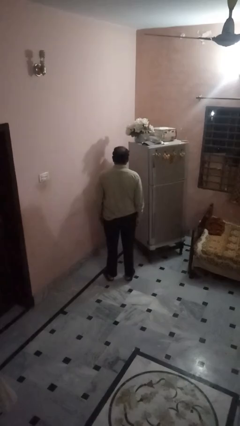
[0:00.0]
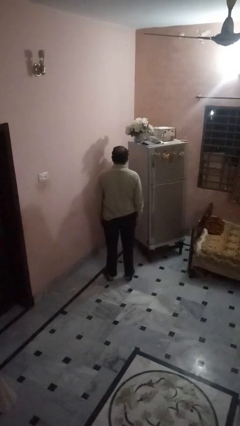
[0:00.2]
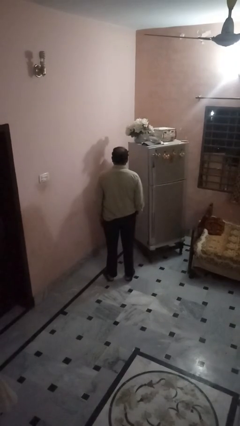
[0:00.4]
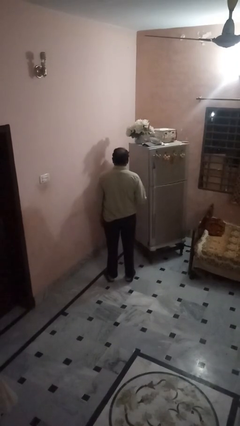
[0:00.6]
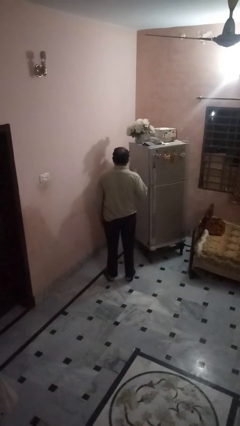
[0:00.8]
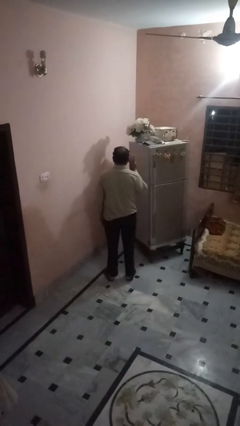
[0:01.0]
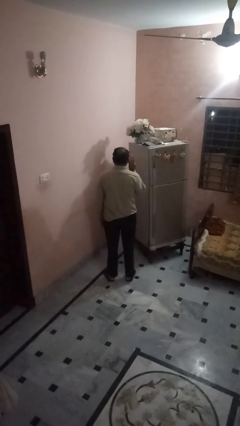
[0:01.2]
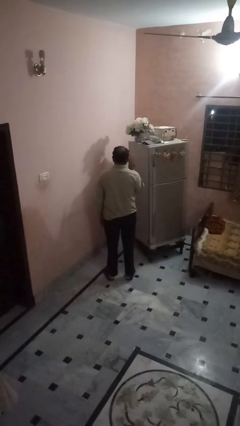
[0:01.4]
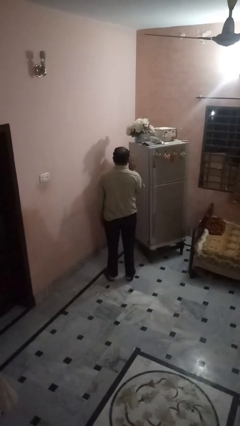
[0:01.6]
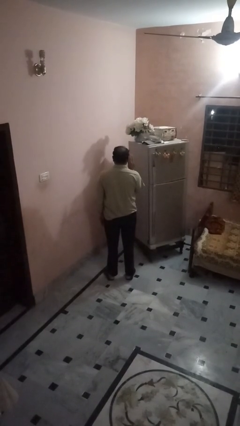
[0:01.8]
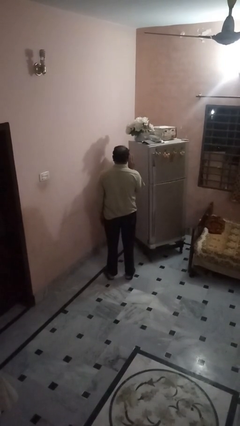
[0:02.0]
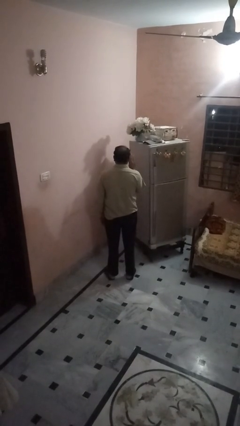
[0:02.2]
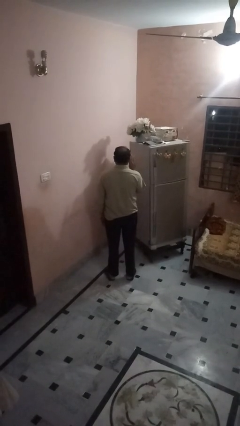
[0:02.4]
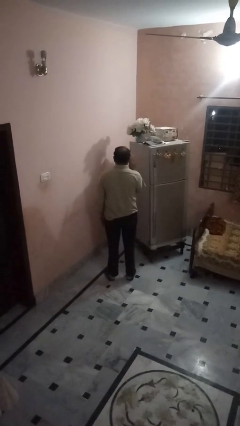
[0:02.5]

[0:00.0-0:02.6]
person gestures number three

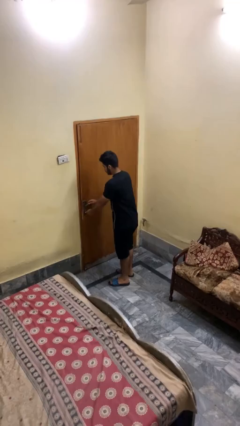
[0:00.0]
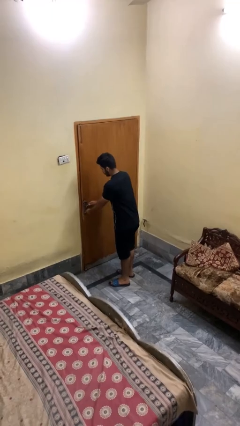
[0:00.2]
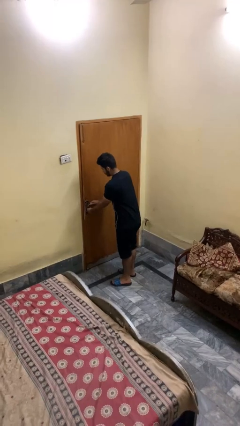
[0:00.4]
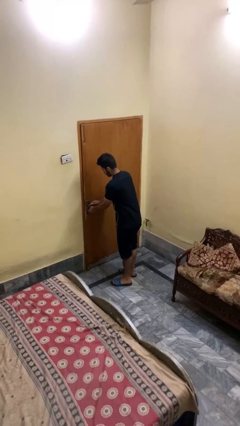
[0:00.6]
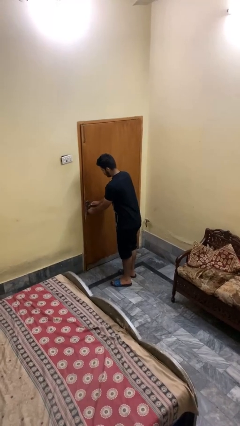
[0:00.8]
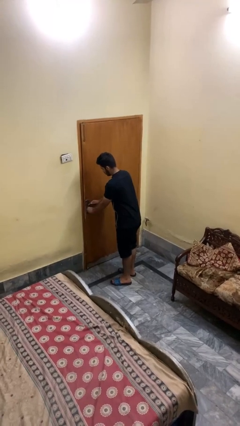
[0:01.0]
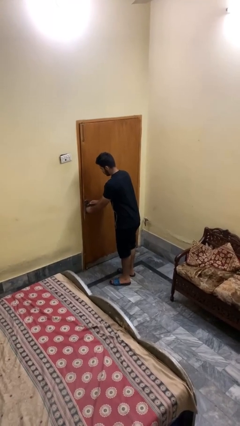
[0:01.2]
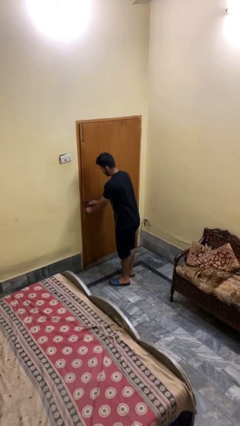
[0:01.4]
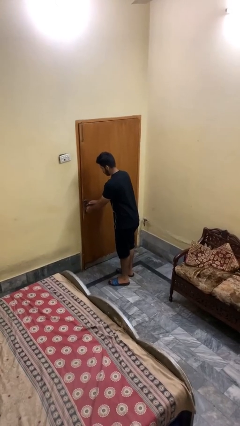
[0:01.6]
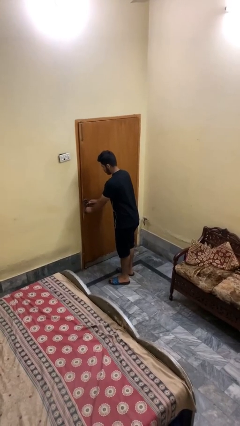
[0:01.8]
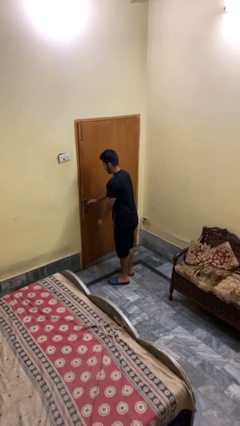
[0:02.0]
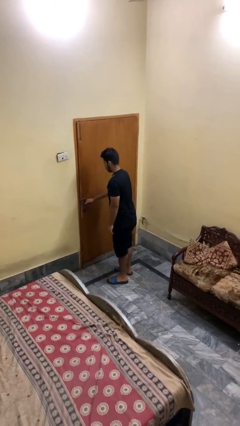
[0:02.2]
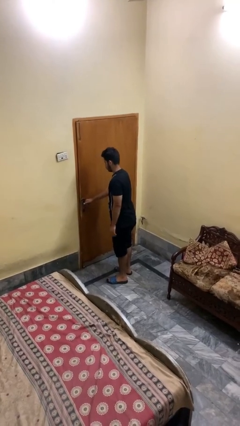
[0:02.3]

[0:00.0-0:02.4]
person unlocks door with keys

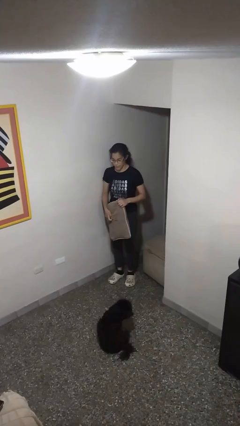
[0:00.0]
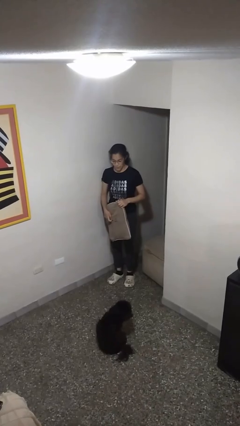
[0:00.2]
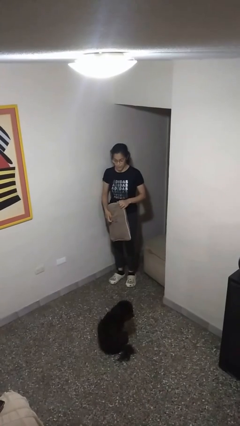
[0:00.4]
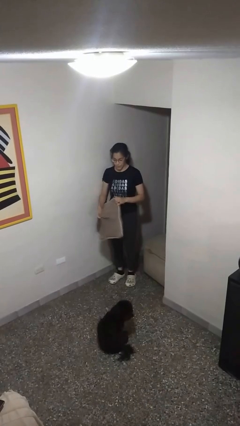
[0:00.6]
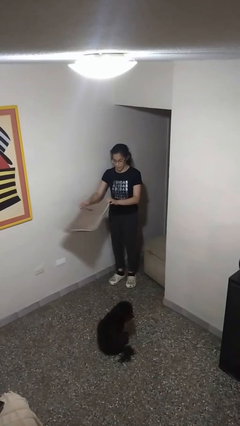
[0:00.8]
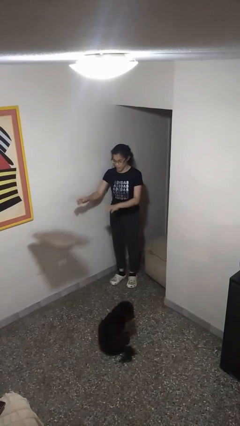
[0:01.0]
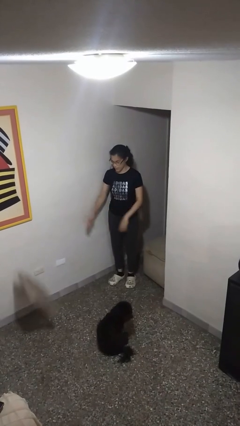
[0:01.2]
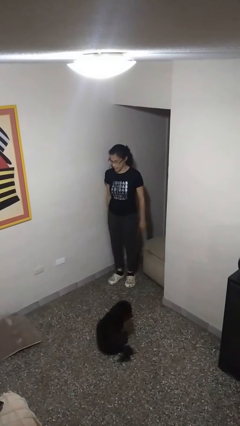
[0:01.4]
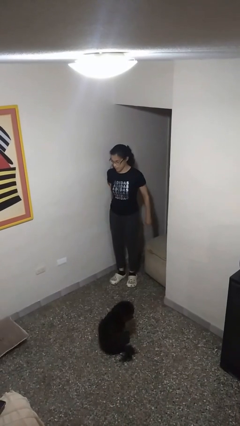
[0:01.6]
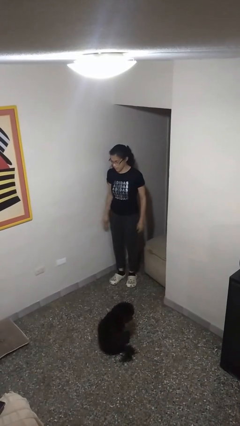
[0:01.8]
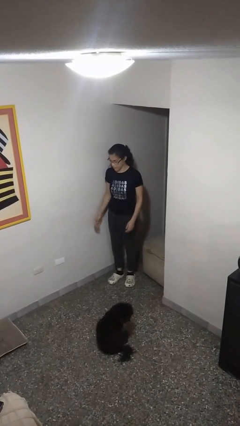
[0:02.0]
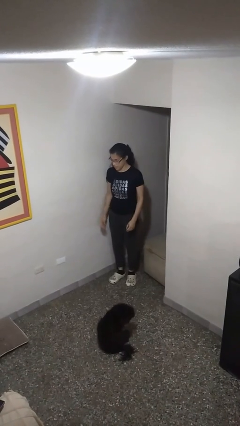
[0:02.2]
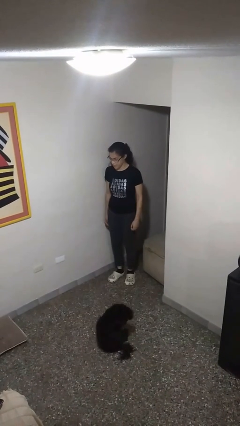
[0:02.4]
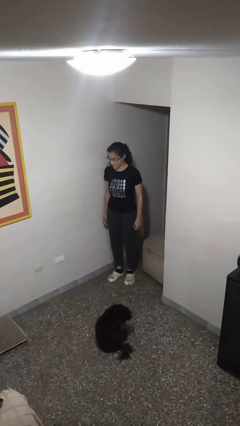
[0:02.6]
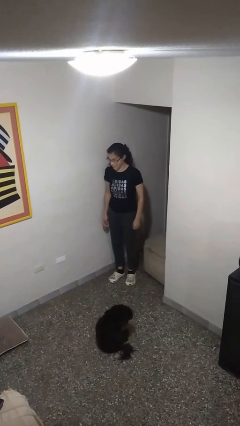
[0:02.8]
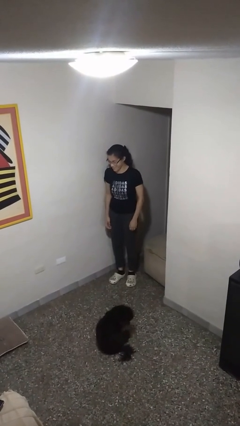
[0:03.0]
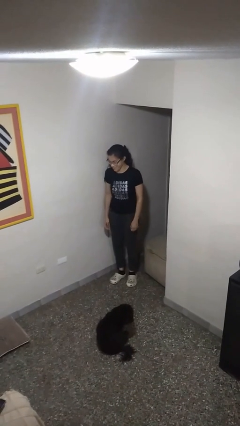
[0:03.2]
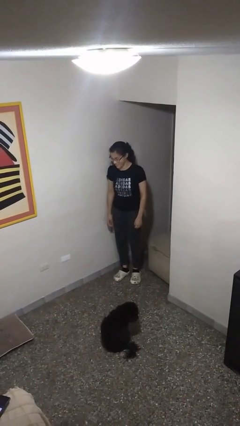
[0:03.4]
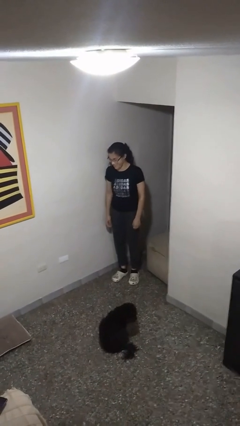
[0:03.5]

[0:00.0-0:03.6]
person throws object to ground

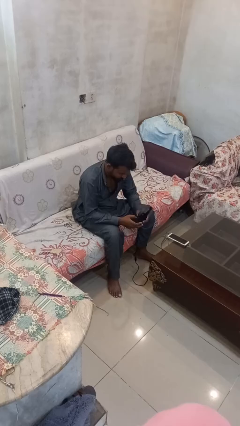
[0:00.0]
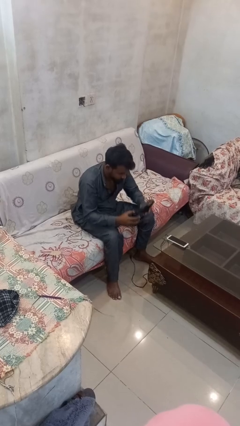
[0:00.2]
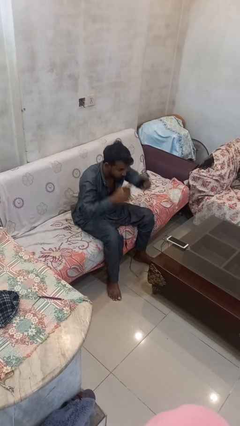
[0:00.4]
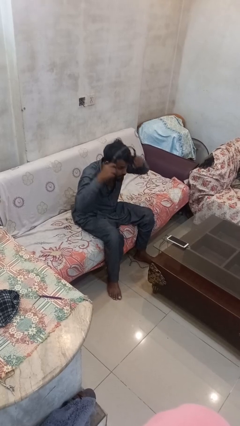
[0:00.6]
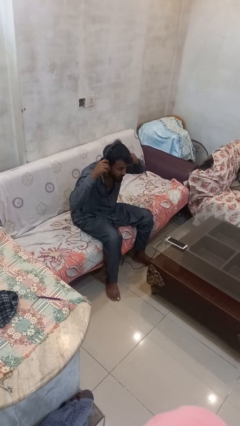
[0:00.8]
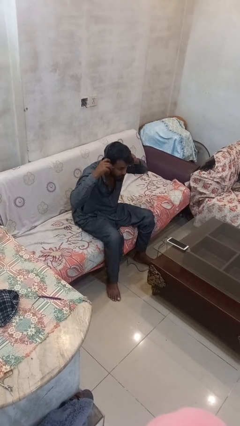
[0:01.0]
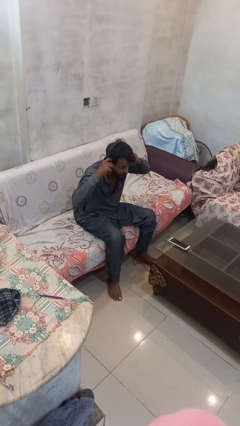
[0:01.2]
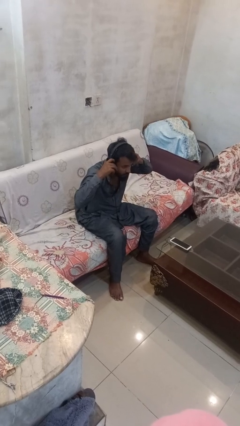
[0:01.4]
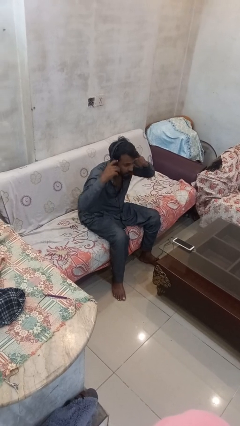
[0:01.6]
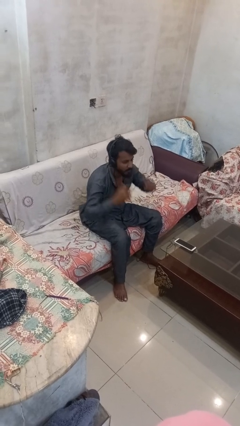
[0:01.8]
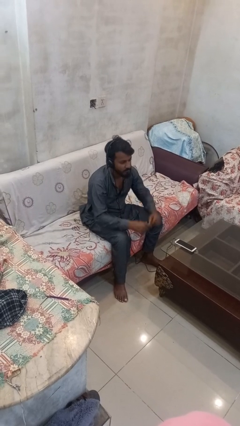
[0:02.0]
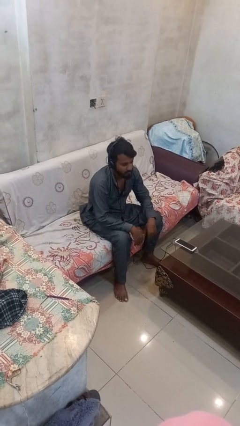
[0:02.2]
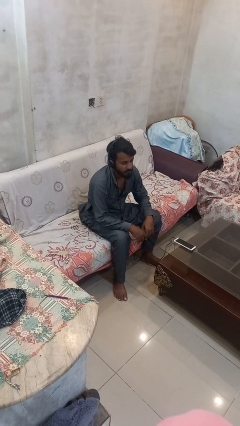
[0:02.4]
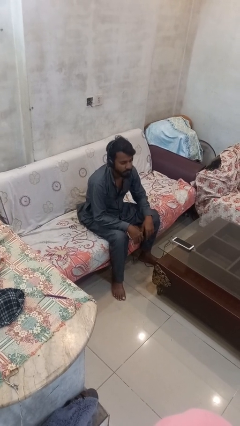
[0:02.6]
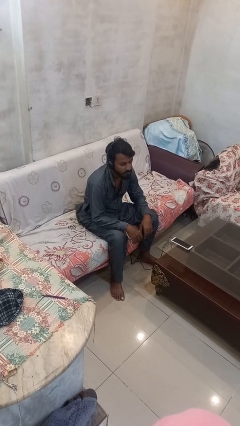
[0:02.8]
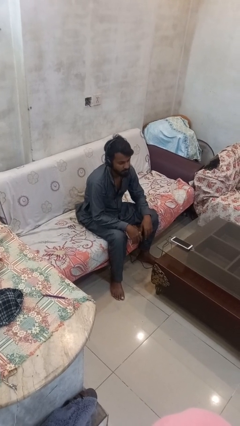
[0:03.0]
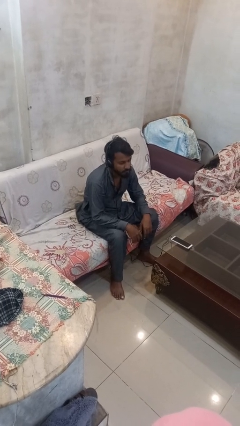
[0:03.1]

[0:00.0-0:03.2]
person puts on headphones

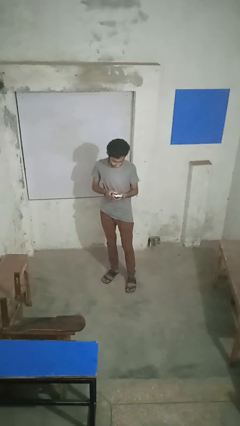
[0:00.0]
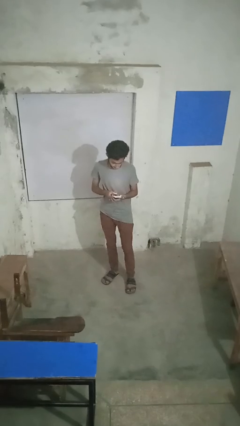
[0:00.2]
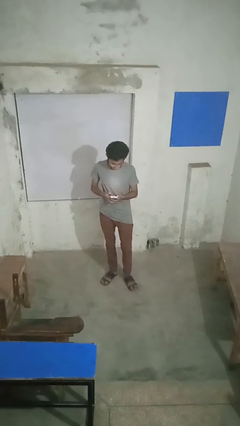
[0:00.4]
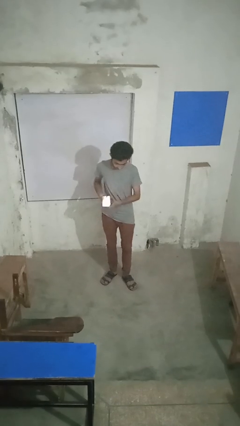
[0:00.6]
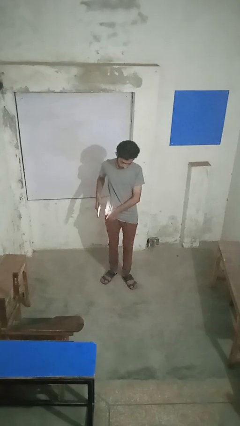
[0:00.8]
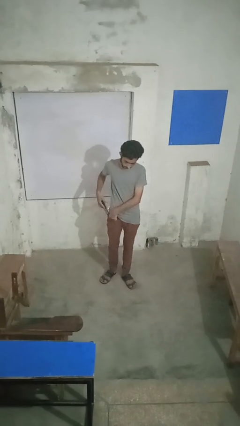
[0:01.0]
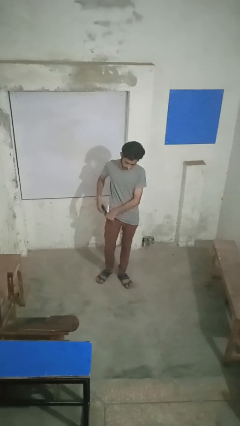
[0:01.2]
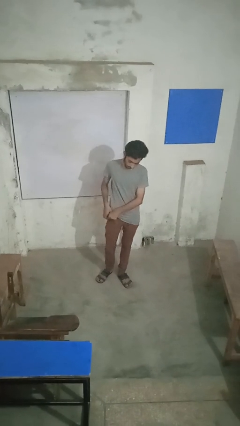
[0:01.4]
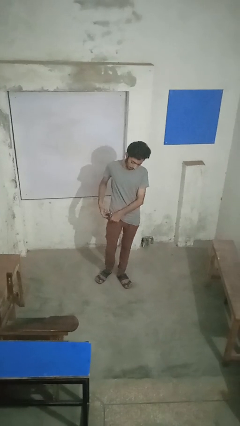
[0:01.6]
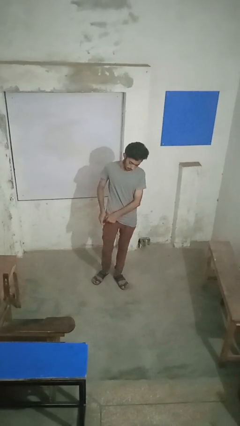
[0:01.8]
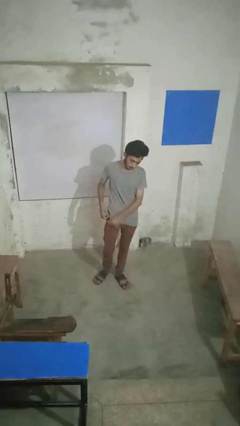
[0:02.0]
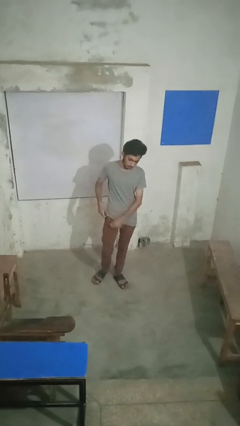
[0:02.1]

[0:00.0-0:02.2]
person puts phone into pocket

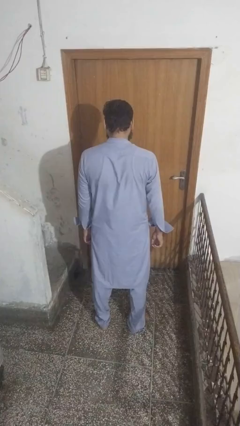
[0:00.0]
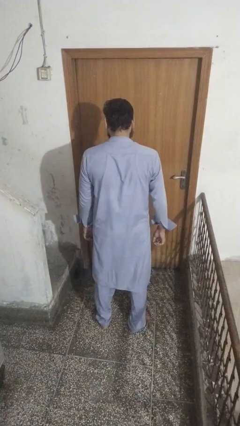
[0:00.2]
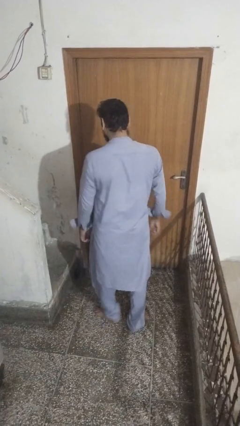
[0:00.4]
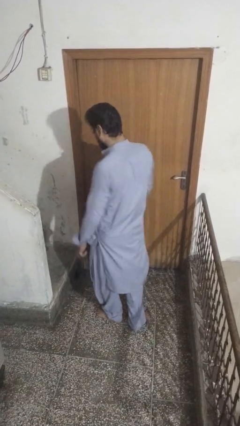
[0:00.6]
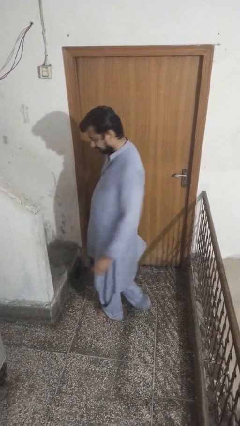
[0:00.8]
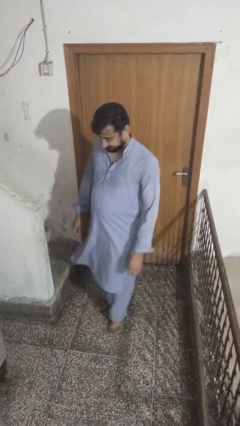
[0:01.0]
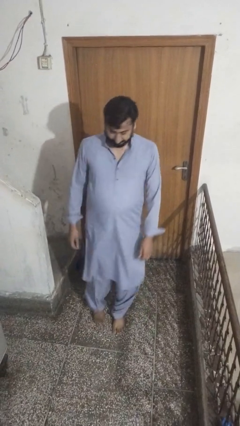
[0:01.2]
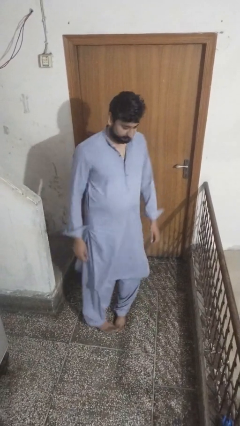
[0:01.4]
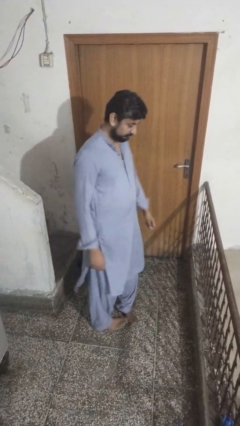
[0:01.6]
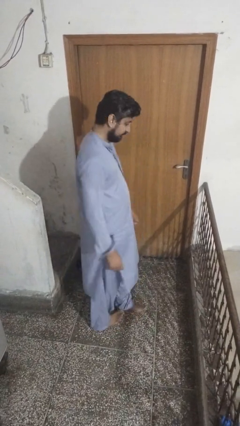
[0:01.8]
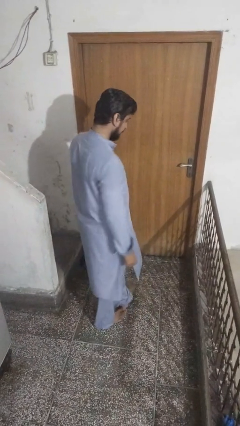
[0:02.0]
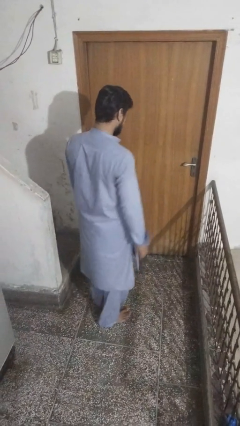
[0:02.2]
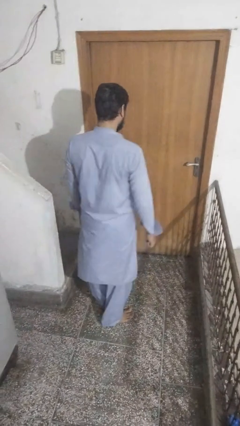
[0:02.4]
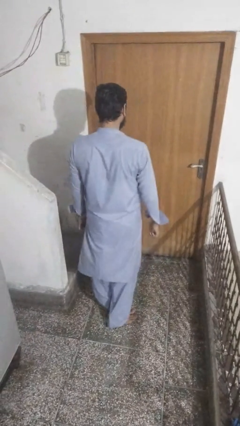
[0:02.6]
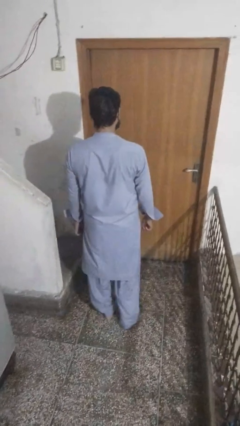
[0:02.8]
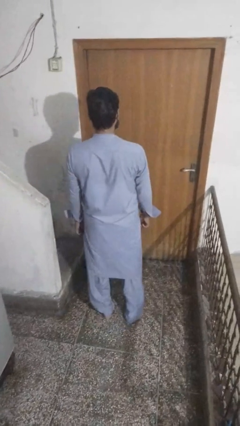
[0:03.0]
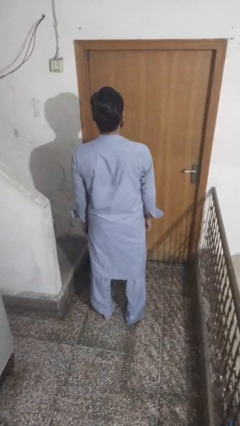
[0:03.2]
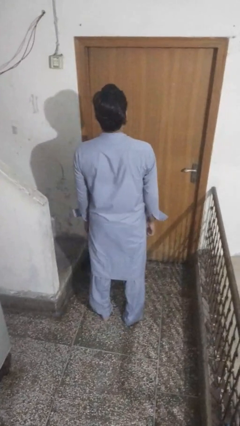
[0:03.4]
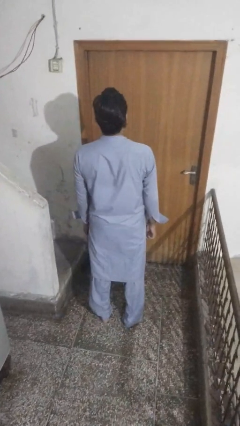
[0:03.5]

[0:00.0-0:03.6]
person twirls
